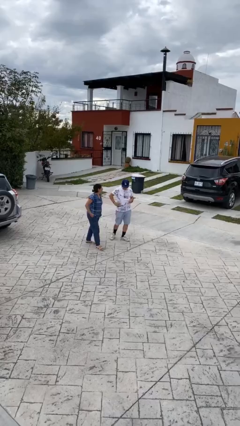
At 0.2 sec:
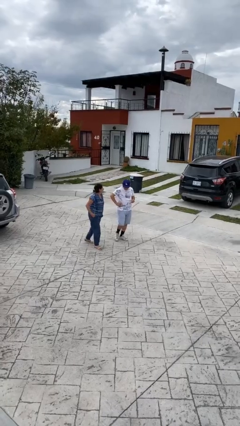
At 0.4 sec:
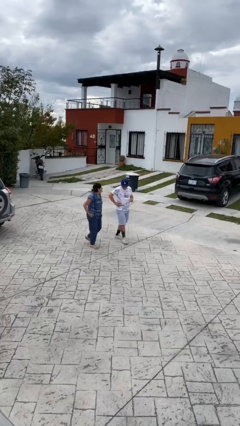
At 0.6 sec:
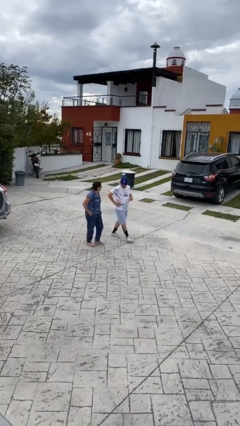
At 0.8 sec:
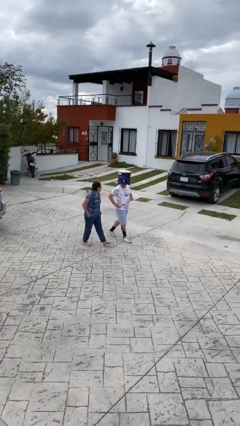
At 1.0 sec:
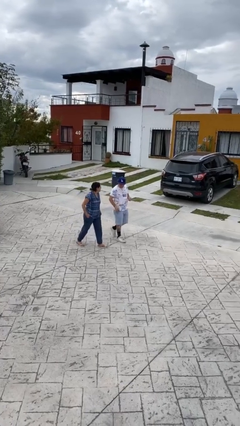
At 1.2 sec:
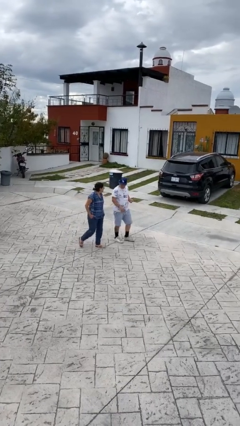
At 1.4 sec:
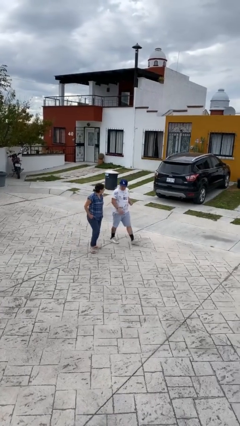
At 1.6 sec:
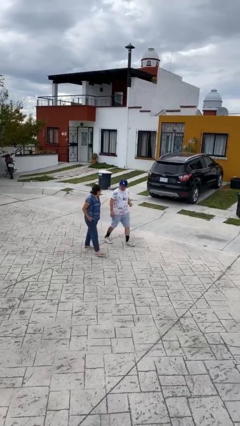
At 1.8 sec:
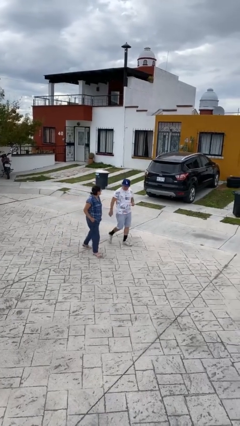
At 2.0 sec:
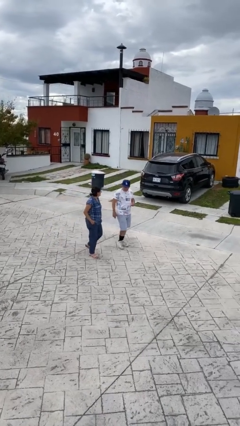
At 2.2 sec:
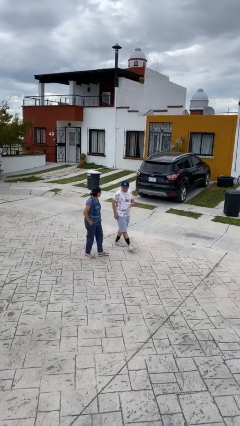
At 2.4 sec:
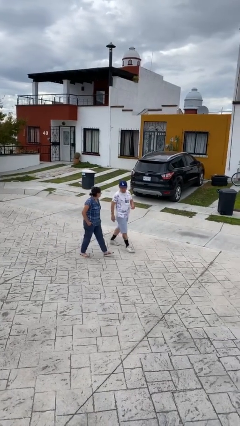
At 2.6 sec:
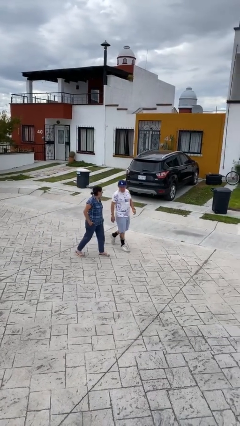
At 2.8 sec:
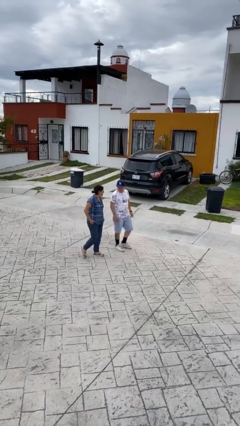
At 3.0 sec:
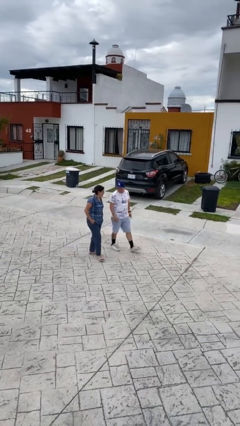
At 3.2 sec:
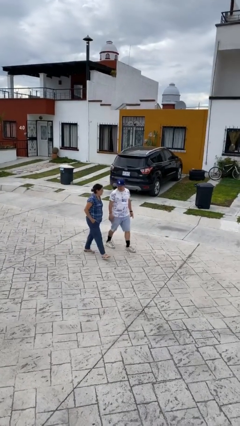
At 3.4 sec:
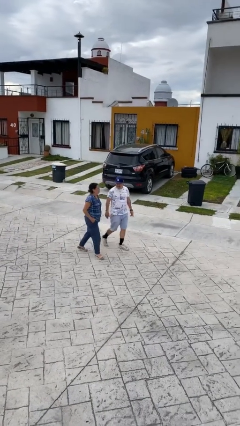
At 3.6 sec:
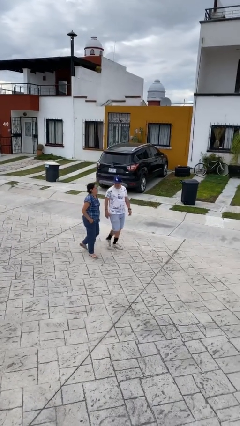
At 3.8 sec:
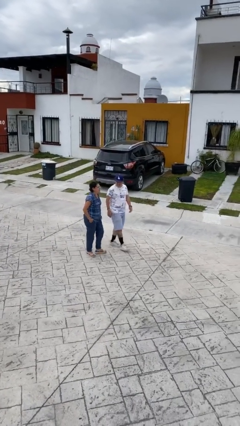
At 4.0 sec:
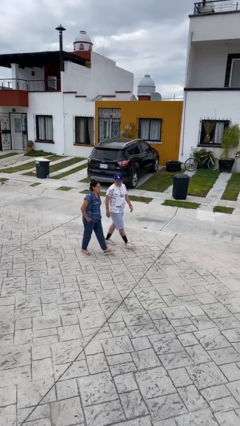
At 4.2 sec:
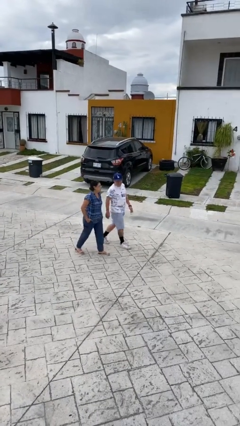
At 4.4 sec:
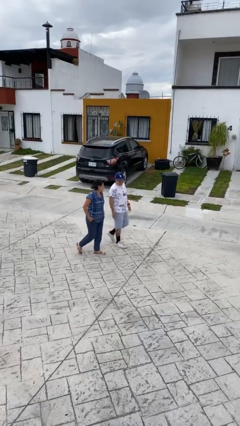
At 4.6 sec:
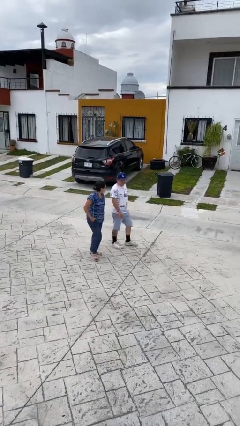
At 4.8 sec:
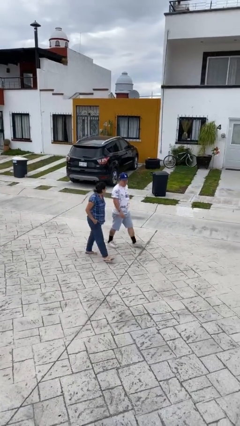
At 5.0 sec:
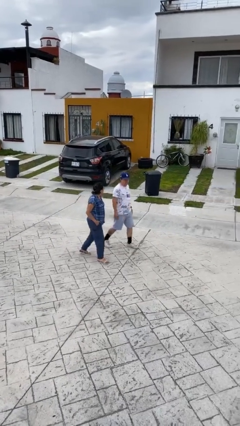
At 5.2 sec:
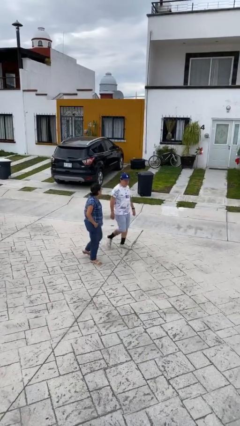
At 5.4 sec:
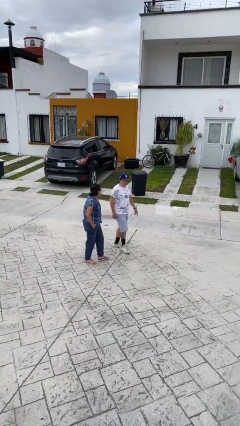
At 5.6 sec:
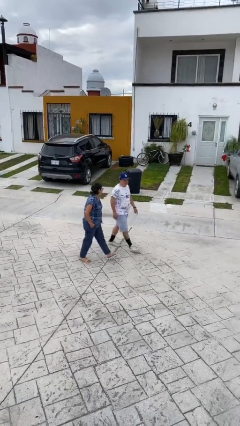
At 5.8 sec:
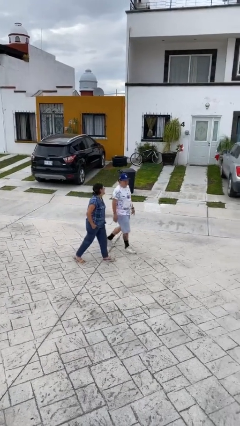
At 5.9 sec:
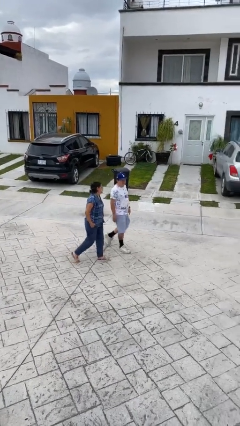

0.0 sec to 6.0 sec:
person talks to person

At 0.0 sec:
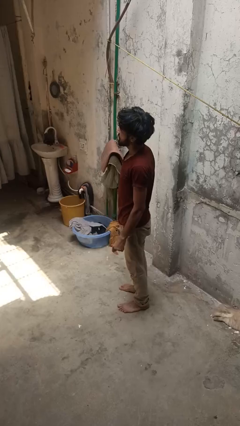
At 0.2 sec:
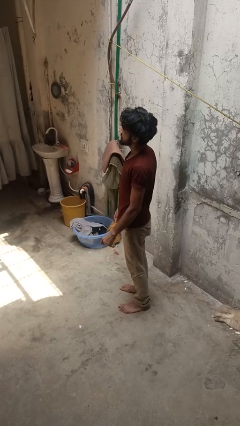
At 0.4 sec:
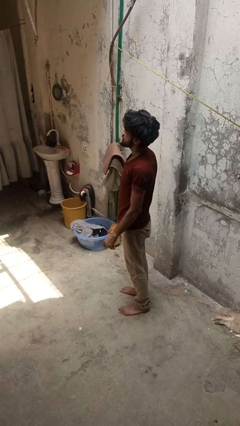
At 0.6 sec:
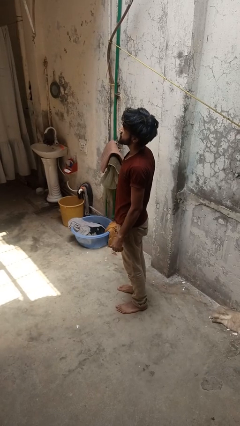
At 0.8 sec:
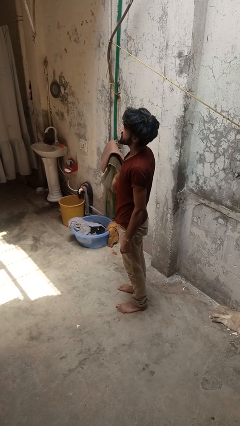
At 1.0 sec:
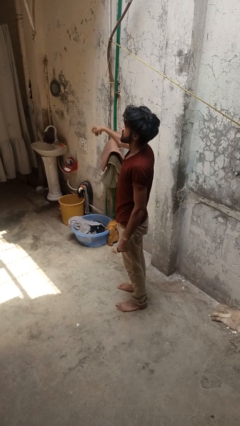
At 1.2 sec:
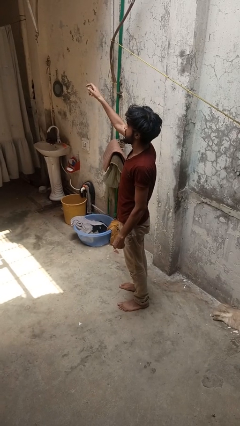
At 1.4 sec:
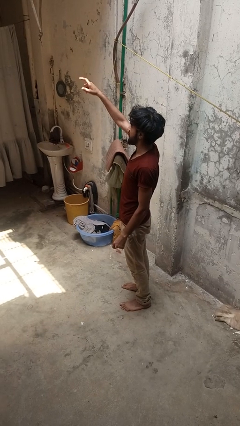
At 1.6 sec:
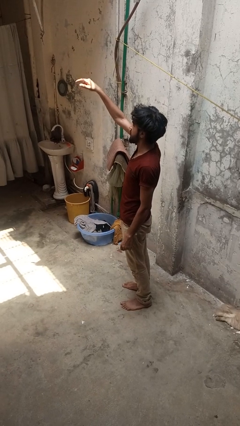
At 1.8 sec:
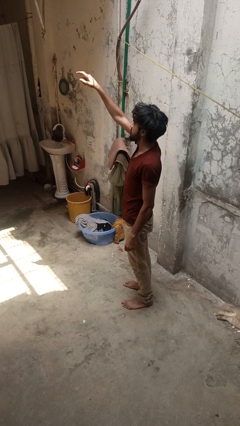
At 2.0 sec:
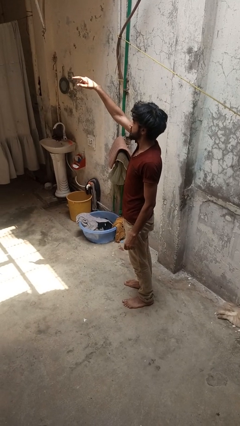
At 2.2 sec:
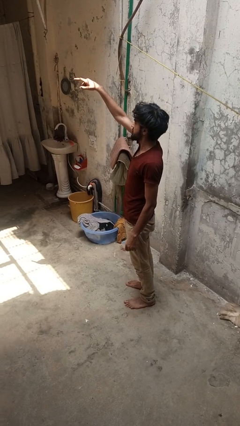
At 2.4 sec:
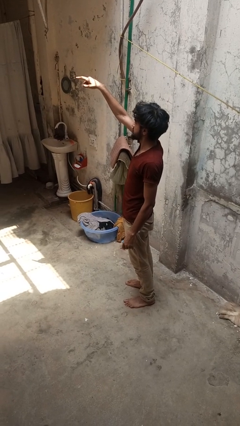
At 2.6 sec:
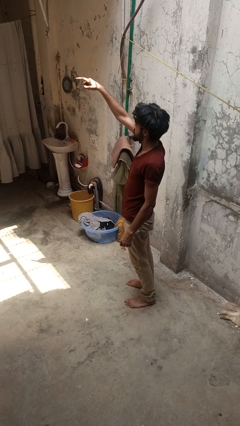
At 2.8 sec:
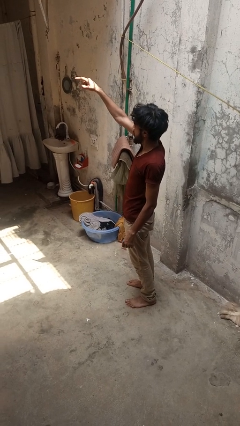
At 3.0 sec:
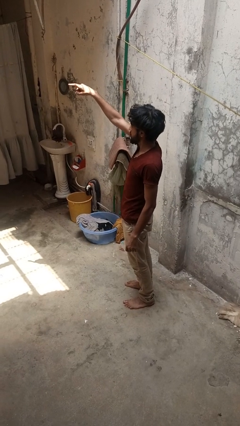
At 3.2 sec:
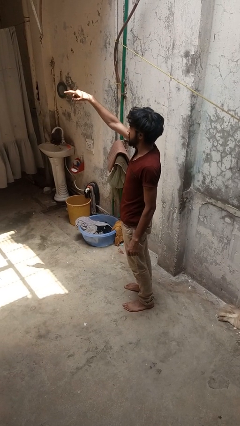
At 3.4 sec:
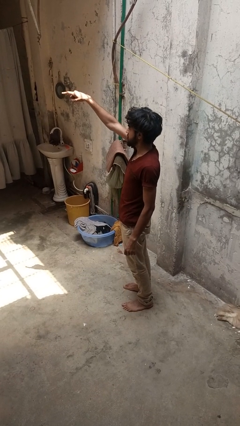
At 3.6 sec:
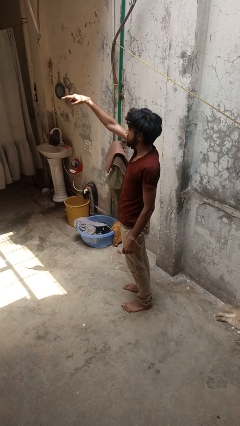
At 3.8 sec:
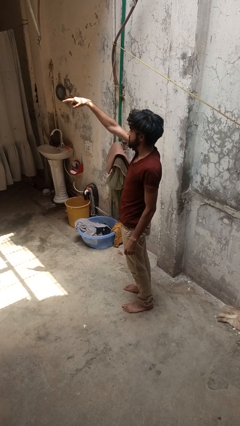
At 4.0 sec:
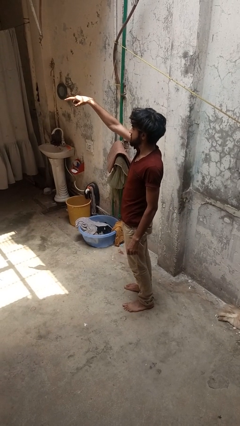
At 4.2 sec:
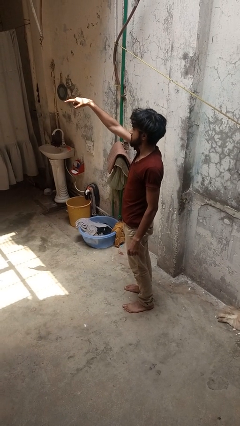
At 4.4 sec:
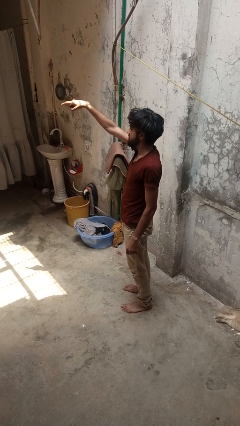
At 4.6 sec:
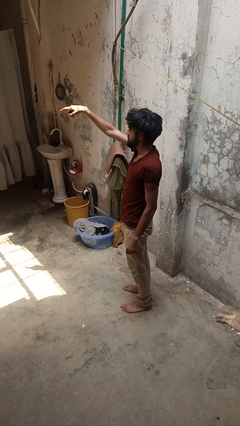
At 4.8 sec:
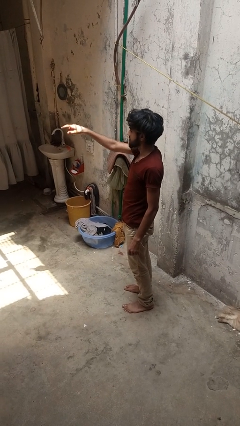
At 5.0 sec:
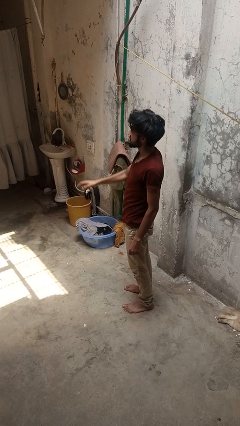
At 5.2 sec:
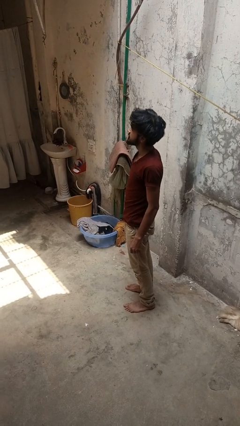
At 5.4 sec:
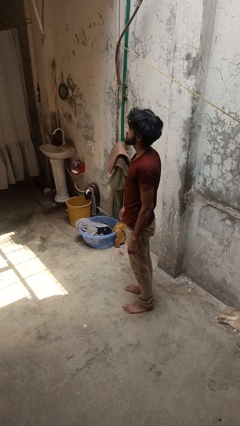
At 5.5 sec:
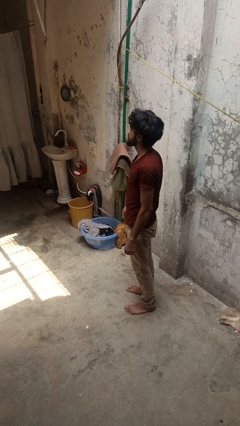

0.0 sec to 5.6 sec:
person points at person

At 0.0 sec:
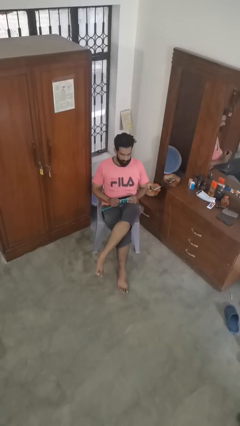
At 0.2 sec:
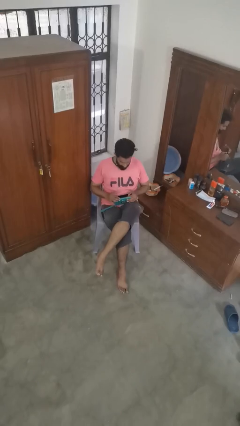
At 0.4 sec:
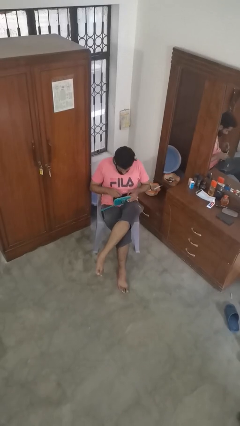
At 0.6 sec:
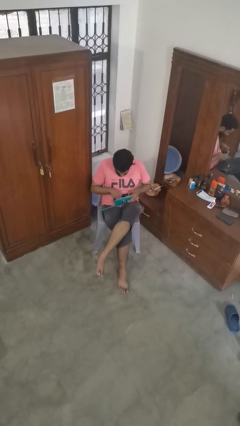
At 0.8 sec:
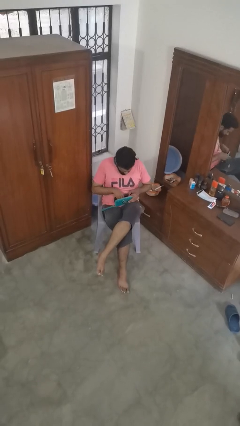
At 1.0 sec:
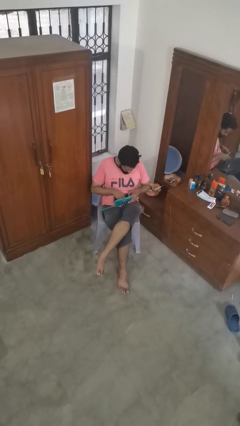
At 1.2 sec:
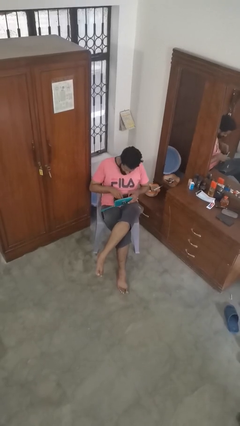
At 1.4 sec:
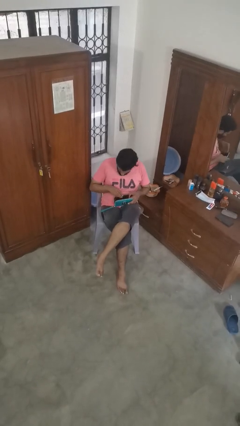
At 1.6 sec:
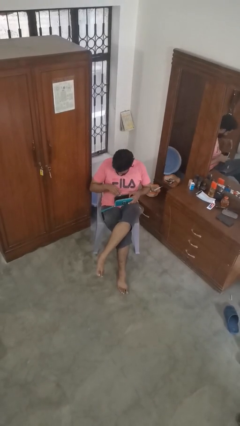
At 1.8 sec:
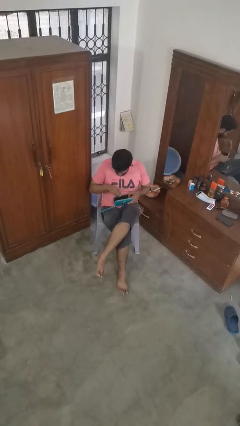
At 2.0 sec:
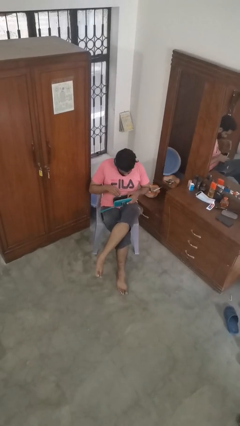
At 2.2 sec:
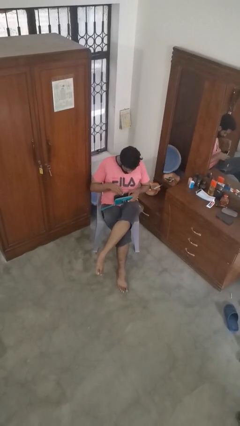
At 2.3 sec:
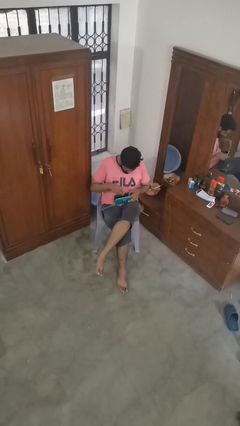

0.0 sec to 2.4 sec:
person searches in purse

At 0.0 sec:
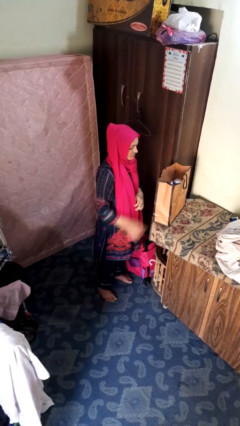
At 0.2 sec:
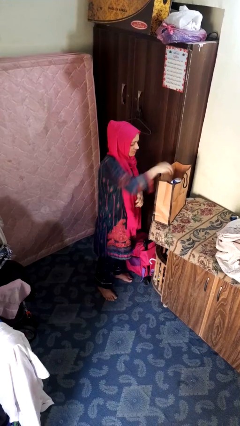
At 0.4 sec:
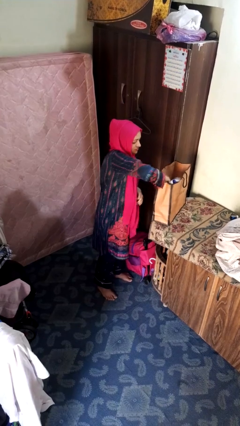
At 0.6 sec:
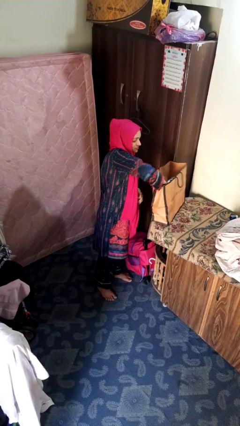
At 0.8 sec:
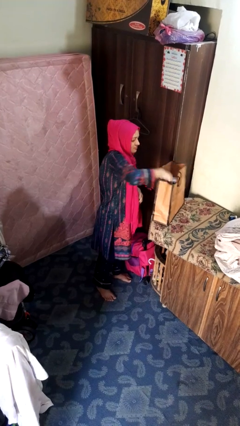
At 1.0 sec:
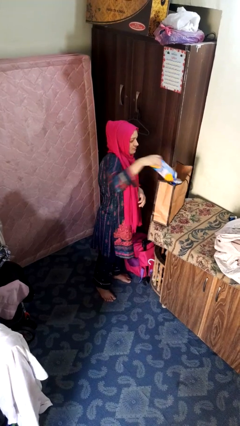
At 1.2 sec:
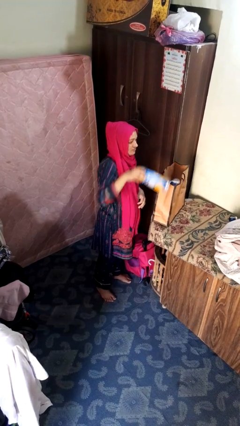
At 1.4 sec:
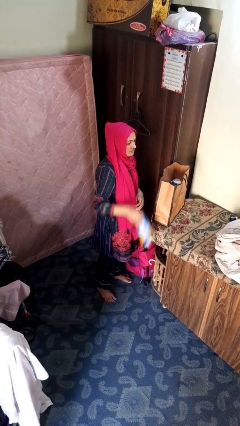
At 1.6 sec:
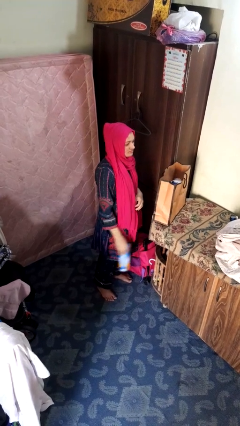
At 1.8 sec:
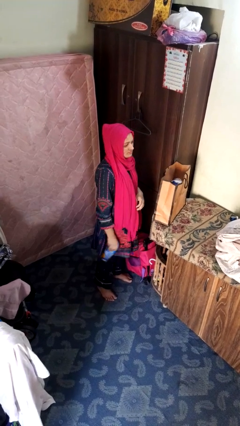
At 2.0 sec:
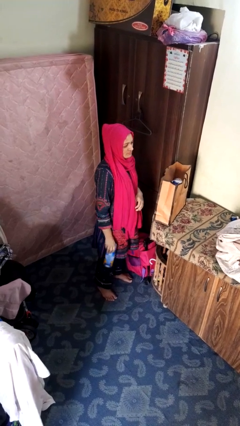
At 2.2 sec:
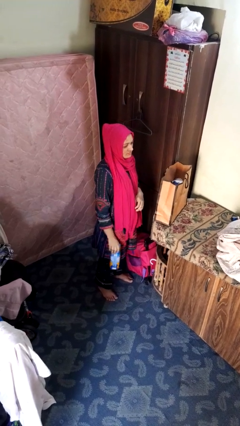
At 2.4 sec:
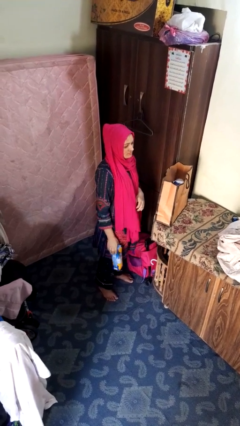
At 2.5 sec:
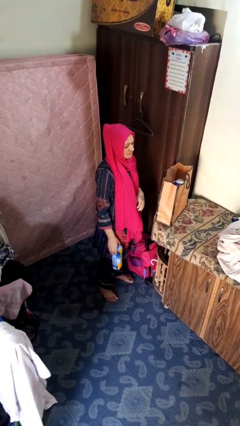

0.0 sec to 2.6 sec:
person takes object from bag

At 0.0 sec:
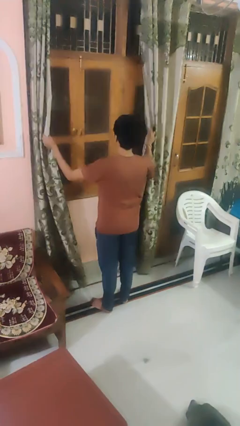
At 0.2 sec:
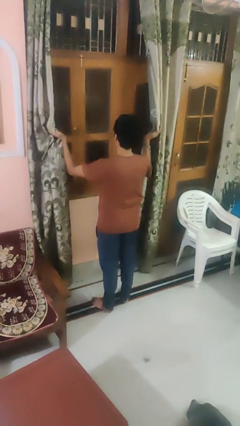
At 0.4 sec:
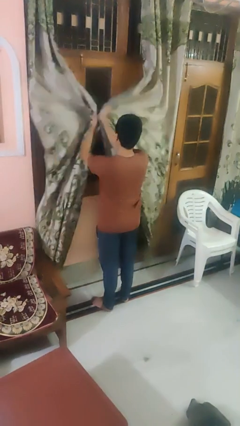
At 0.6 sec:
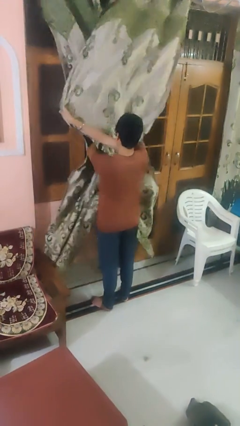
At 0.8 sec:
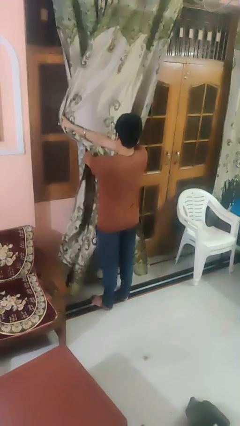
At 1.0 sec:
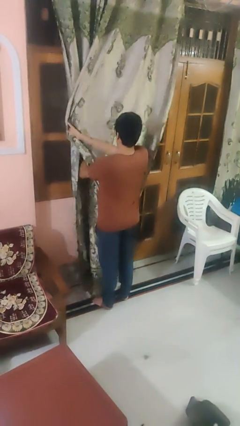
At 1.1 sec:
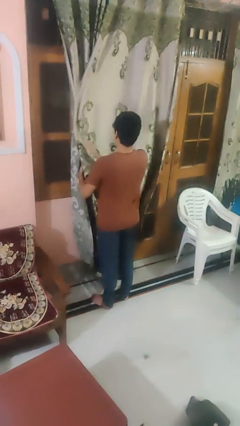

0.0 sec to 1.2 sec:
person closes curtains
